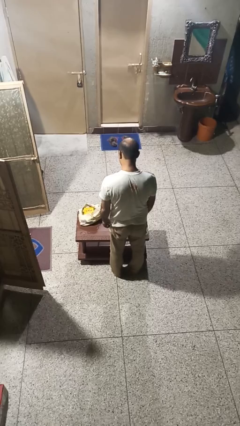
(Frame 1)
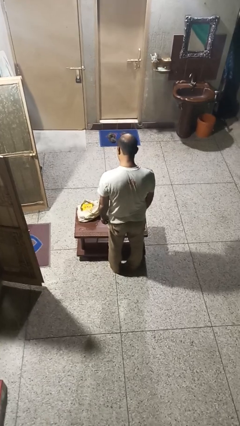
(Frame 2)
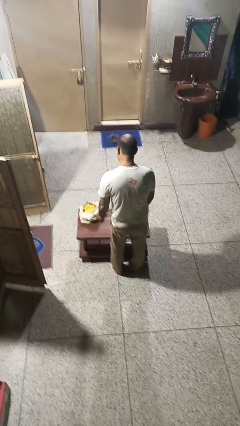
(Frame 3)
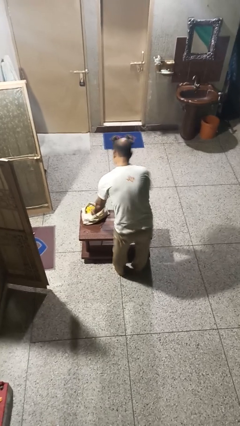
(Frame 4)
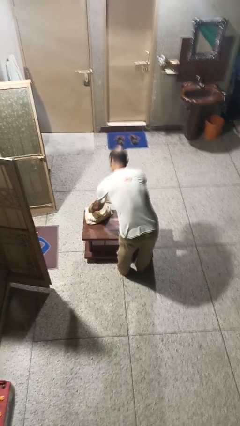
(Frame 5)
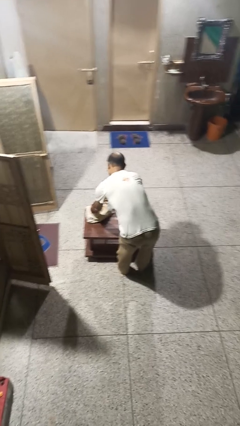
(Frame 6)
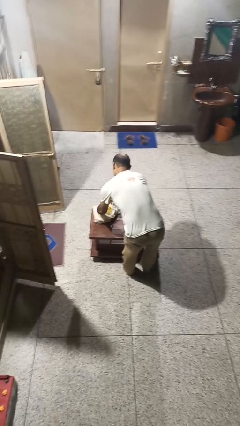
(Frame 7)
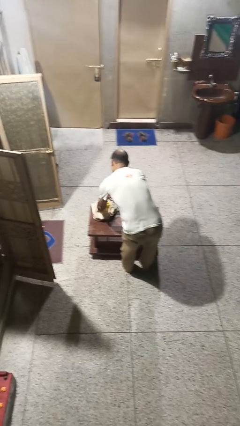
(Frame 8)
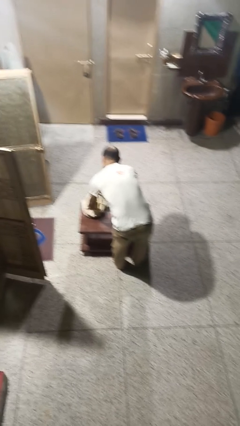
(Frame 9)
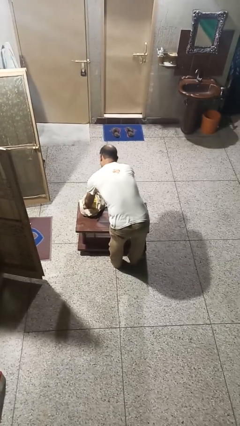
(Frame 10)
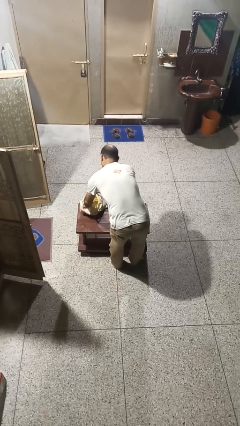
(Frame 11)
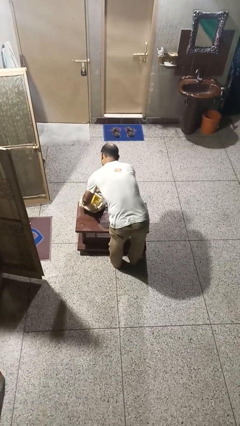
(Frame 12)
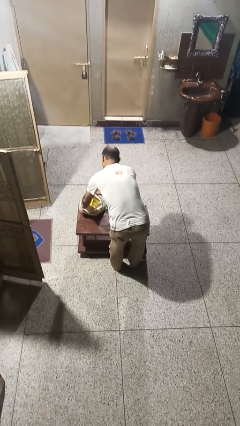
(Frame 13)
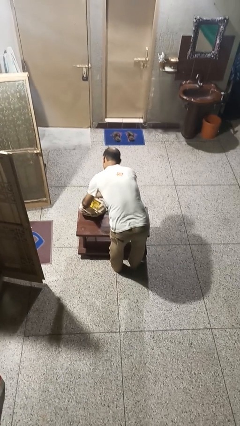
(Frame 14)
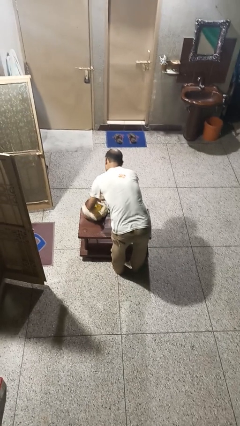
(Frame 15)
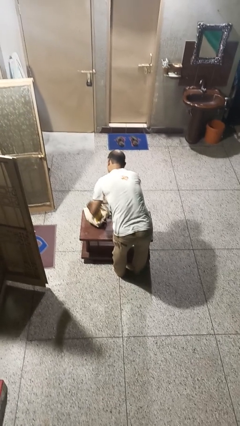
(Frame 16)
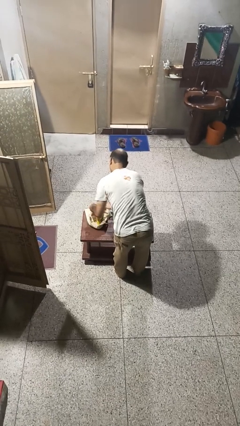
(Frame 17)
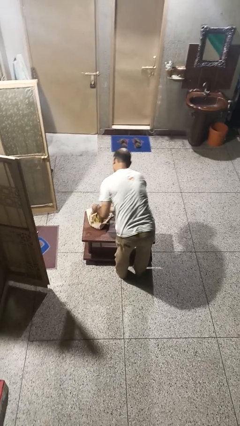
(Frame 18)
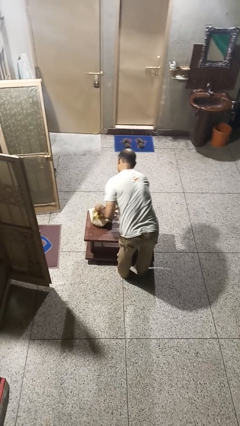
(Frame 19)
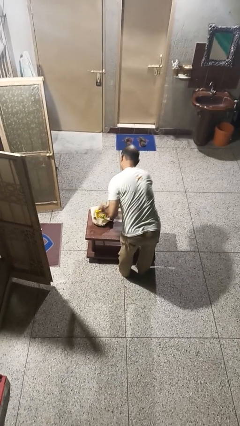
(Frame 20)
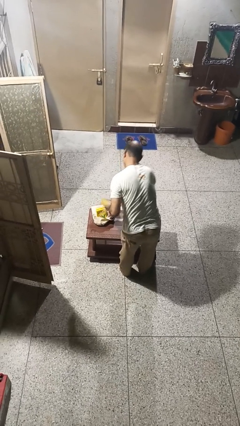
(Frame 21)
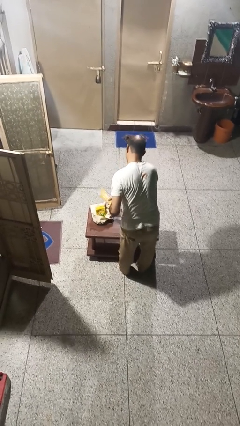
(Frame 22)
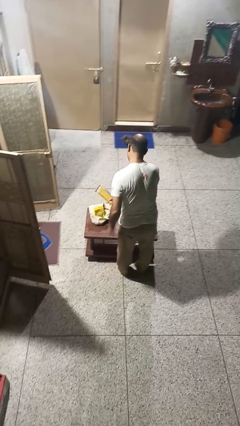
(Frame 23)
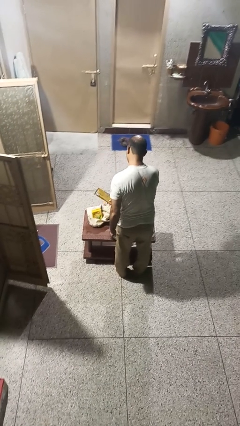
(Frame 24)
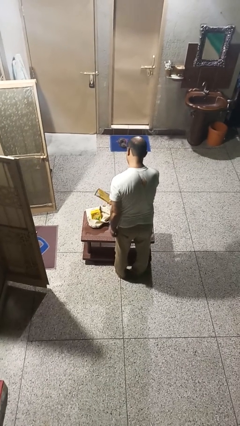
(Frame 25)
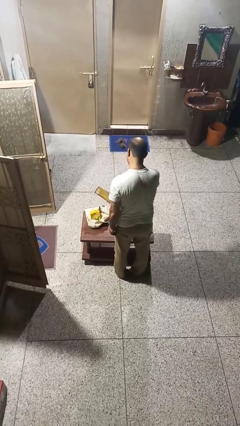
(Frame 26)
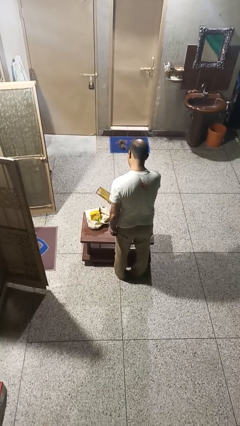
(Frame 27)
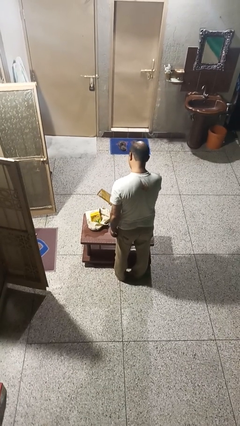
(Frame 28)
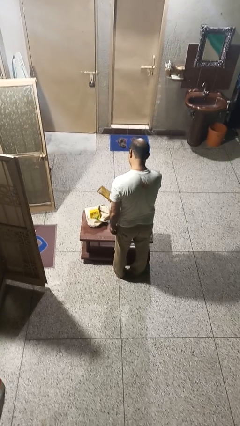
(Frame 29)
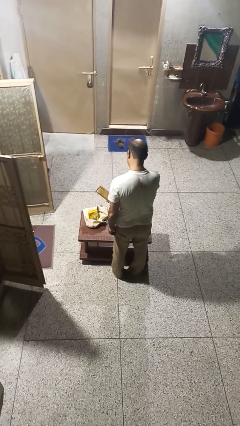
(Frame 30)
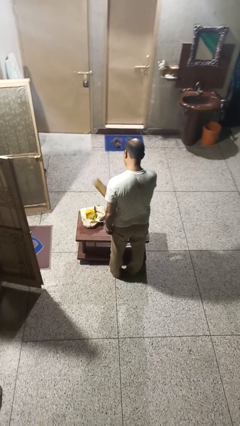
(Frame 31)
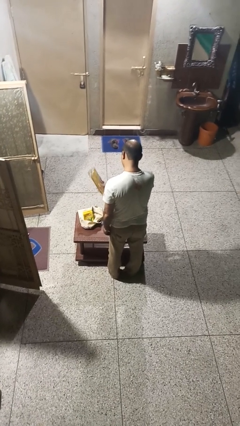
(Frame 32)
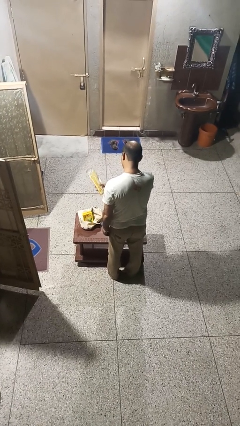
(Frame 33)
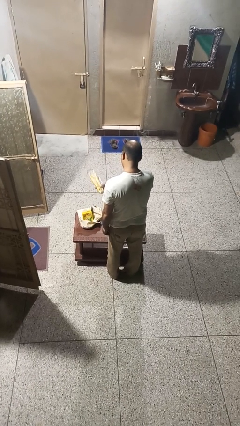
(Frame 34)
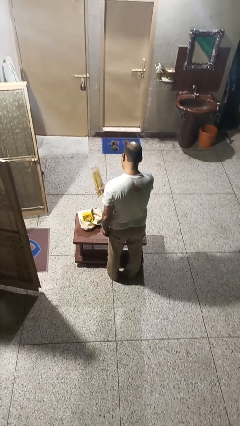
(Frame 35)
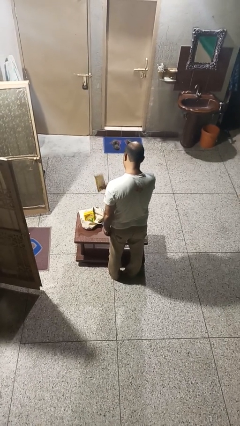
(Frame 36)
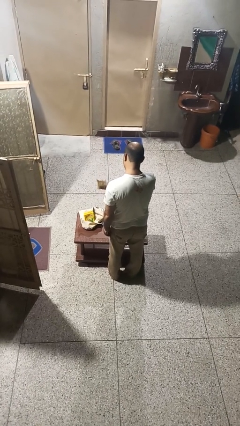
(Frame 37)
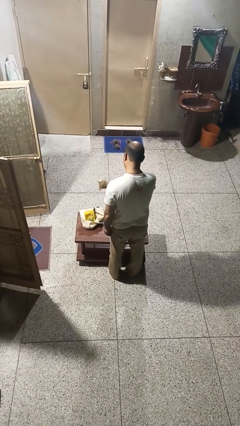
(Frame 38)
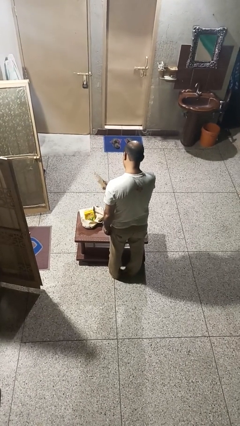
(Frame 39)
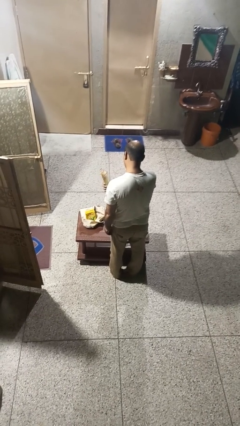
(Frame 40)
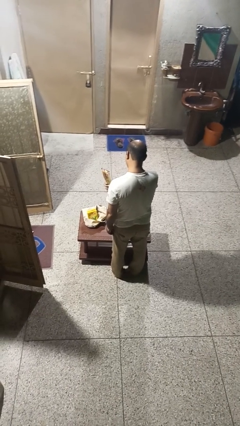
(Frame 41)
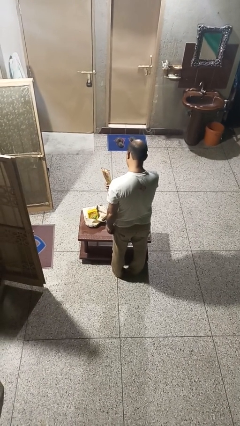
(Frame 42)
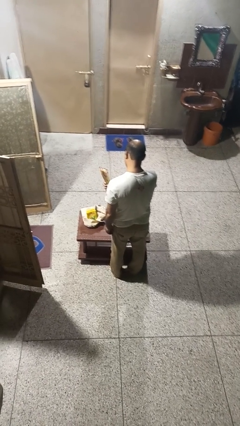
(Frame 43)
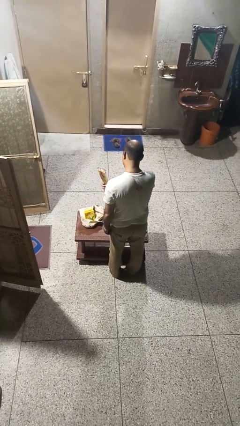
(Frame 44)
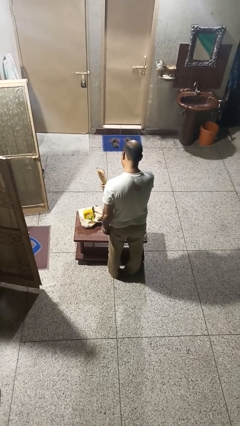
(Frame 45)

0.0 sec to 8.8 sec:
person takes object from bag

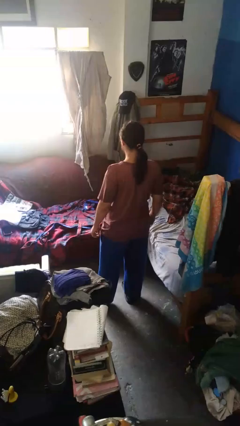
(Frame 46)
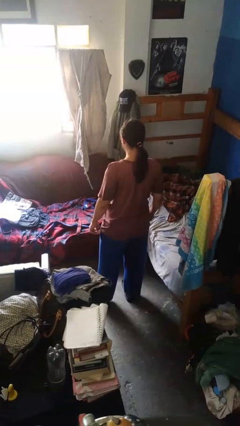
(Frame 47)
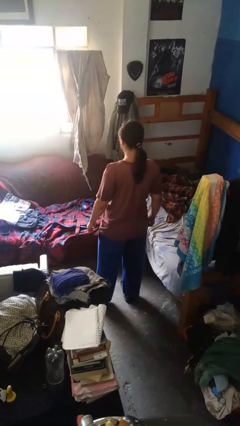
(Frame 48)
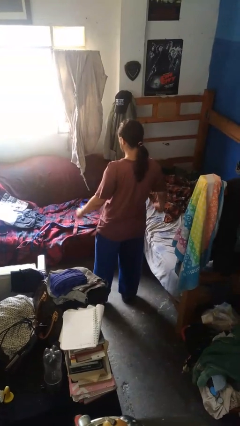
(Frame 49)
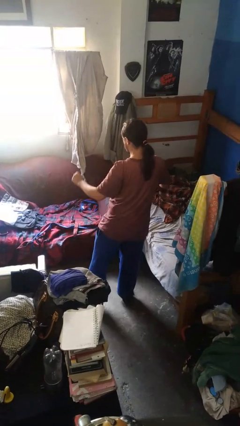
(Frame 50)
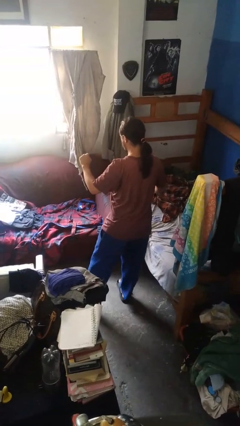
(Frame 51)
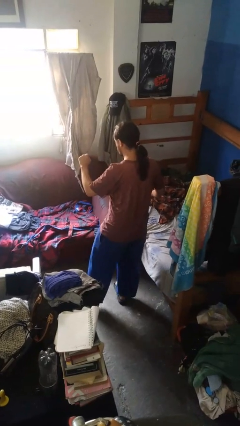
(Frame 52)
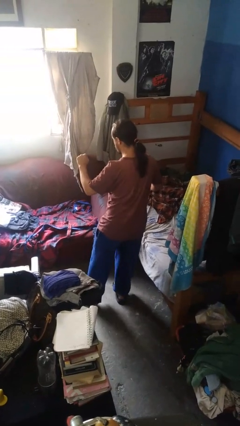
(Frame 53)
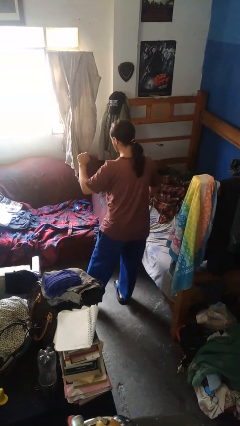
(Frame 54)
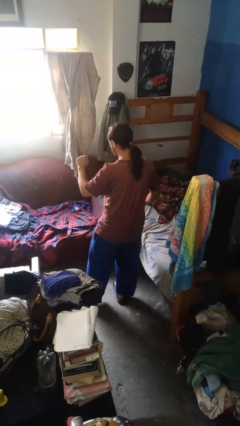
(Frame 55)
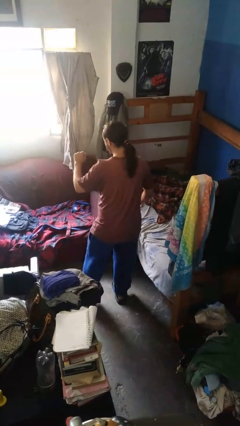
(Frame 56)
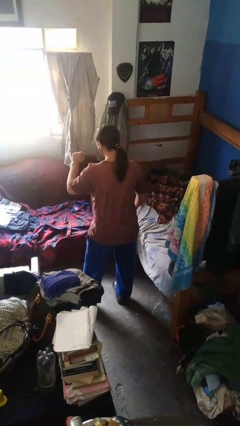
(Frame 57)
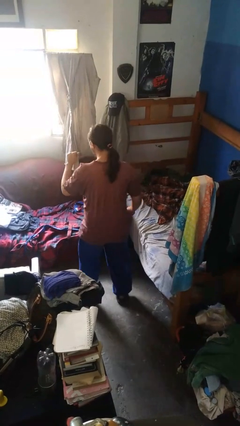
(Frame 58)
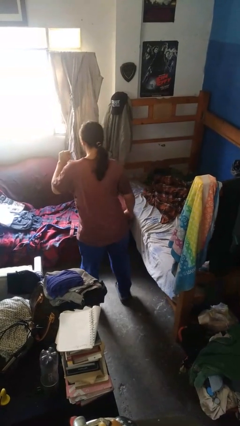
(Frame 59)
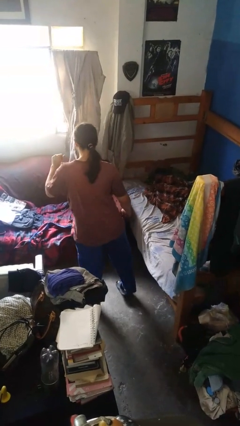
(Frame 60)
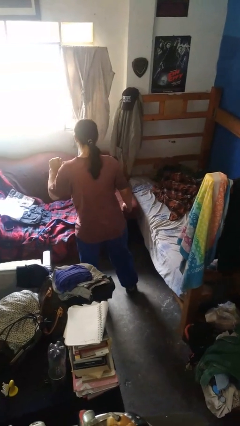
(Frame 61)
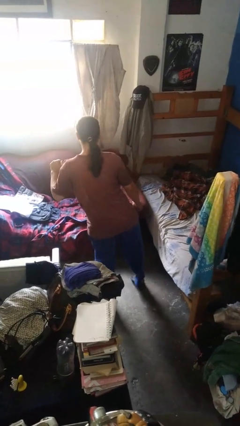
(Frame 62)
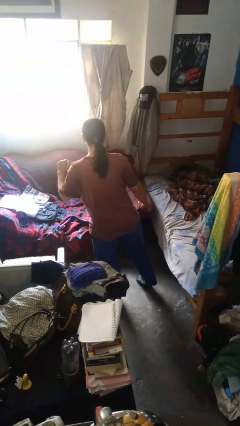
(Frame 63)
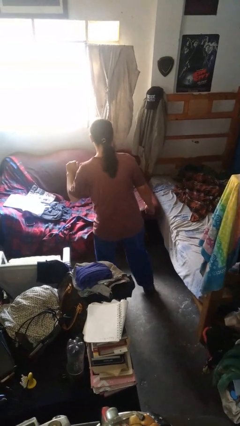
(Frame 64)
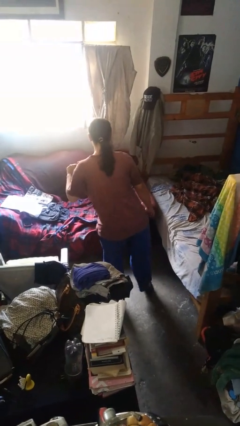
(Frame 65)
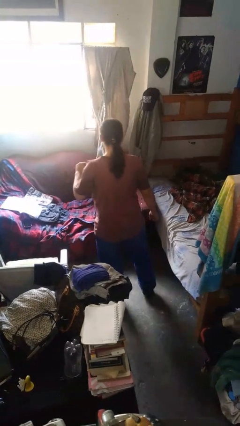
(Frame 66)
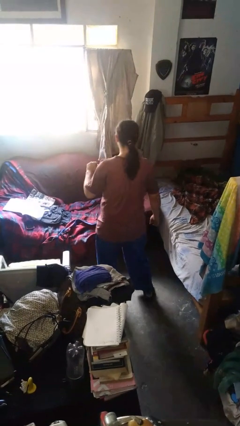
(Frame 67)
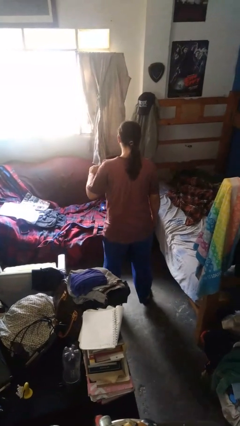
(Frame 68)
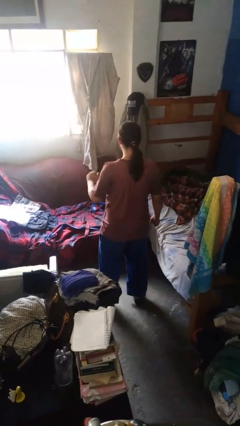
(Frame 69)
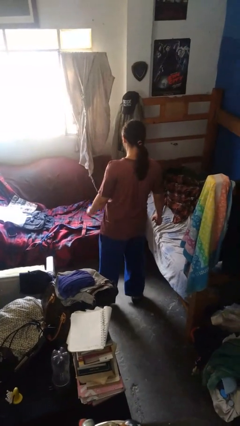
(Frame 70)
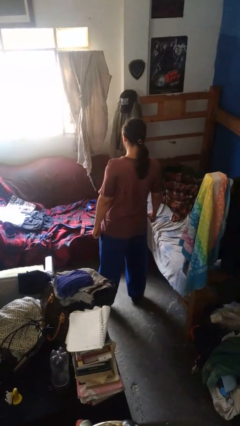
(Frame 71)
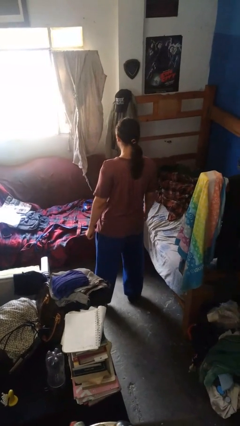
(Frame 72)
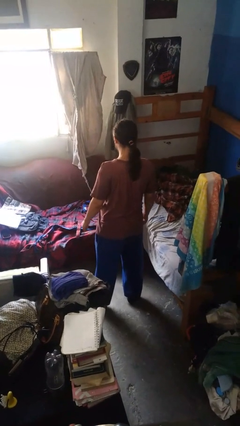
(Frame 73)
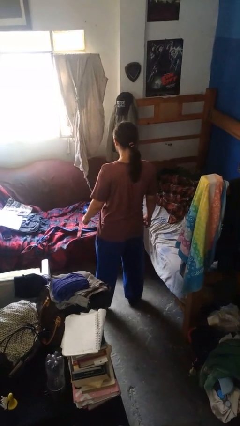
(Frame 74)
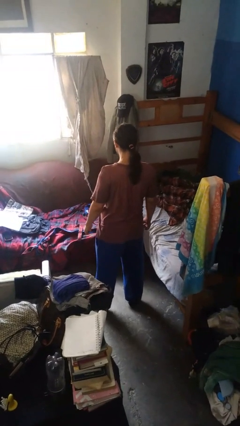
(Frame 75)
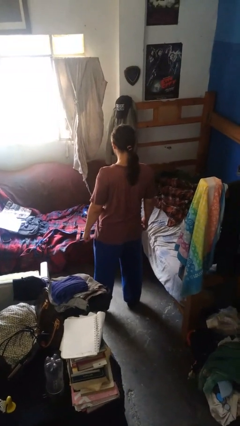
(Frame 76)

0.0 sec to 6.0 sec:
person wiggles hips

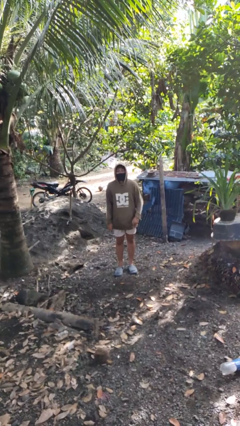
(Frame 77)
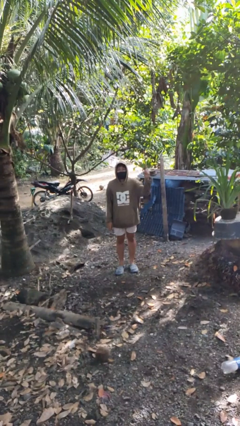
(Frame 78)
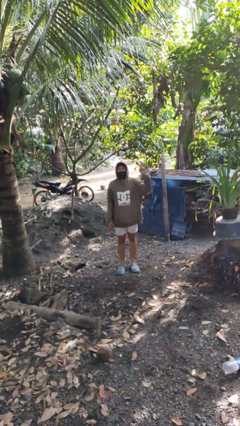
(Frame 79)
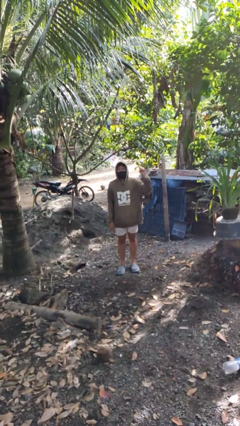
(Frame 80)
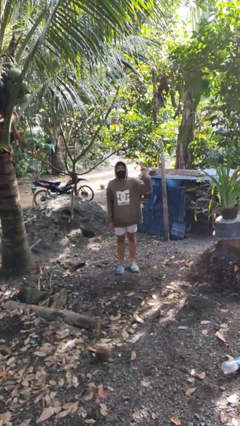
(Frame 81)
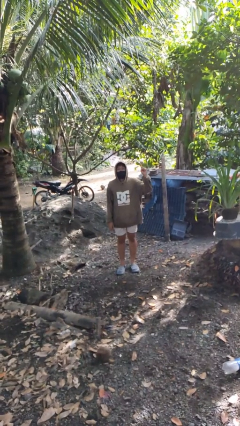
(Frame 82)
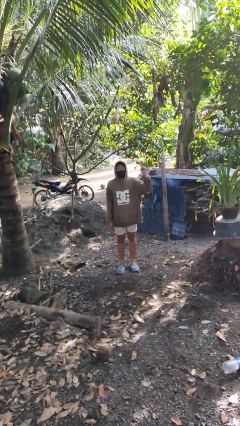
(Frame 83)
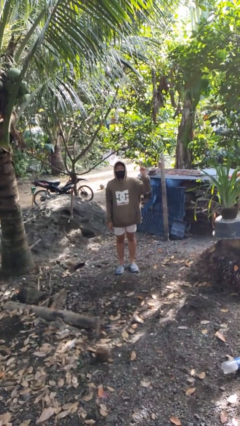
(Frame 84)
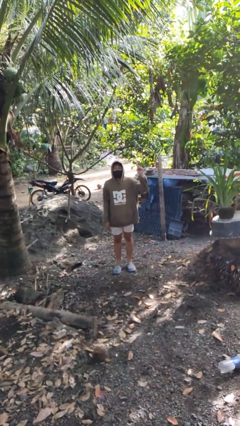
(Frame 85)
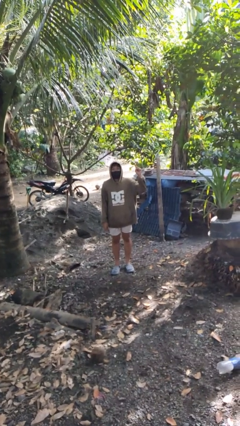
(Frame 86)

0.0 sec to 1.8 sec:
person gestures number one

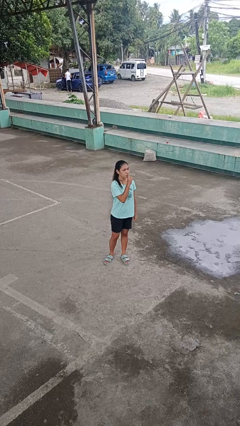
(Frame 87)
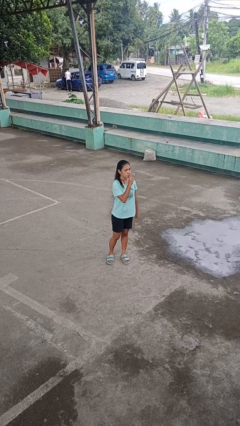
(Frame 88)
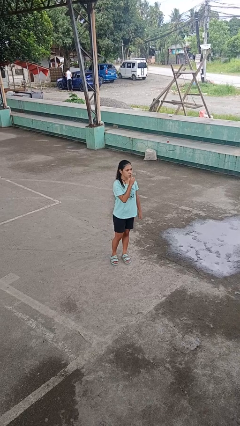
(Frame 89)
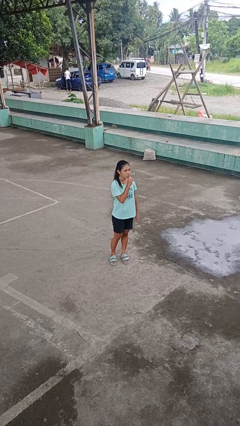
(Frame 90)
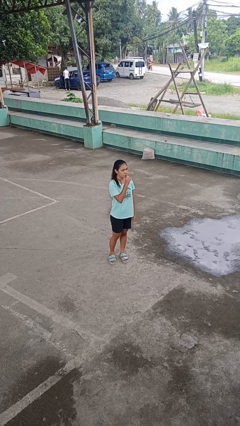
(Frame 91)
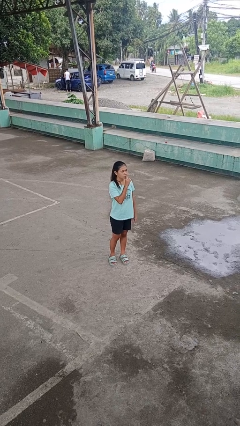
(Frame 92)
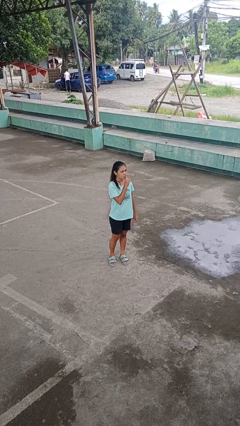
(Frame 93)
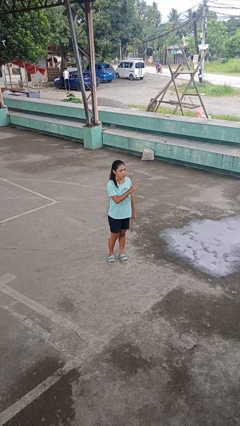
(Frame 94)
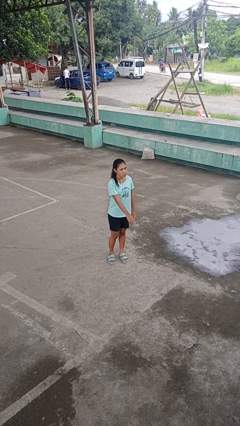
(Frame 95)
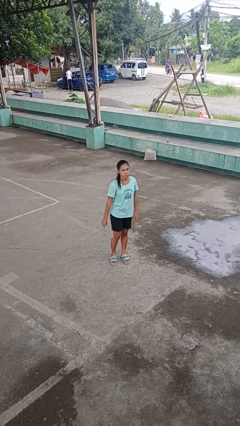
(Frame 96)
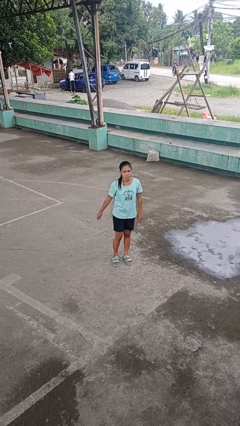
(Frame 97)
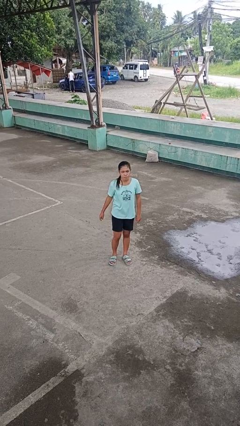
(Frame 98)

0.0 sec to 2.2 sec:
person gestures be quiet
